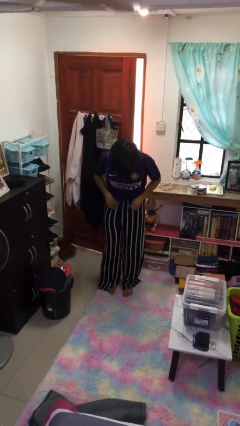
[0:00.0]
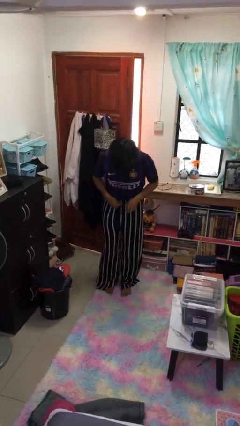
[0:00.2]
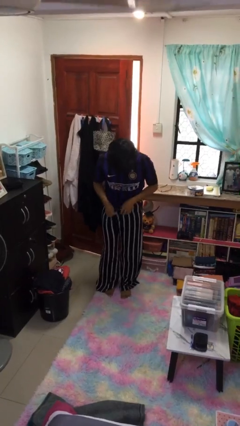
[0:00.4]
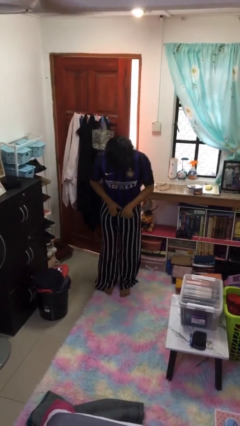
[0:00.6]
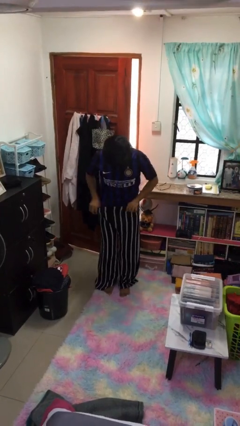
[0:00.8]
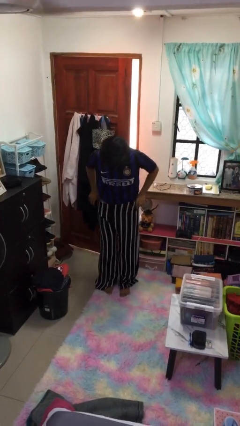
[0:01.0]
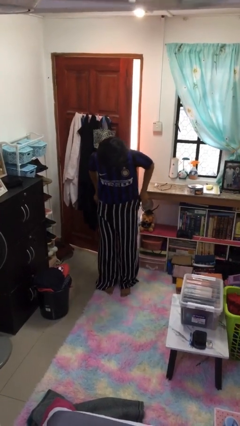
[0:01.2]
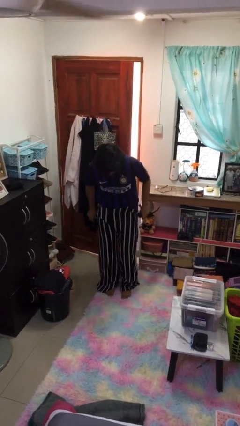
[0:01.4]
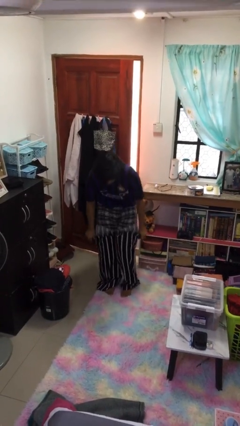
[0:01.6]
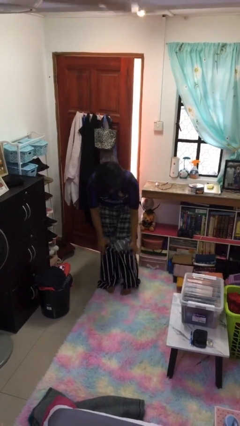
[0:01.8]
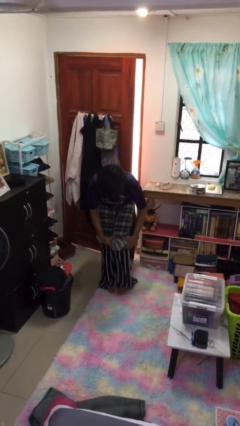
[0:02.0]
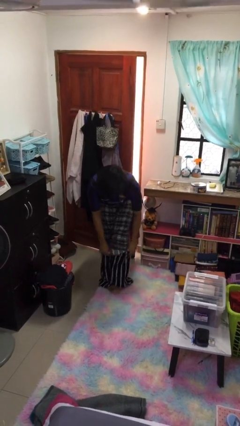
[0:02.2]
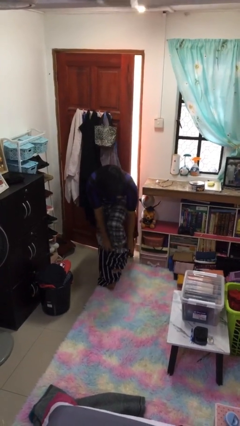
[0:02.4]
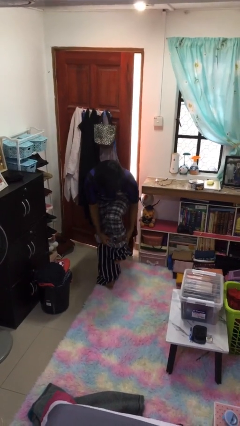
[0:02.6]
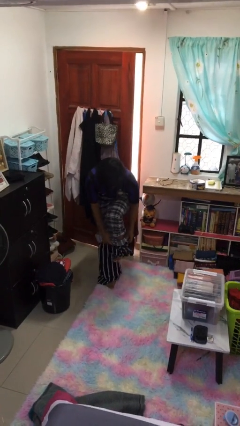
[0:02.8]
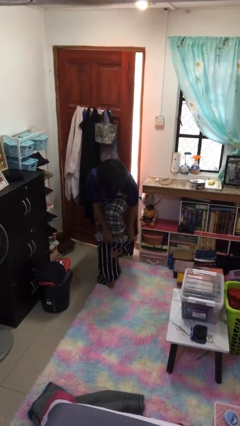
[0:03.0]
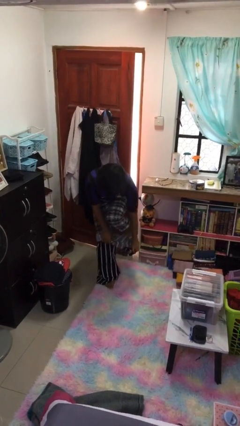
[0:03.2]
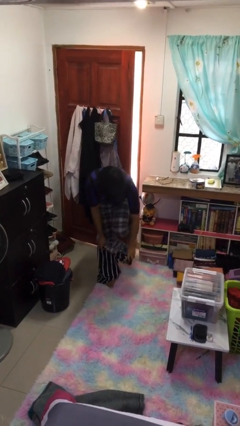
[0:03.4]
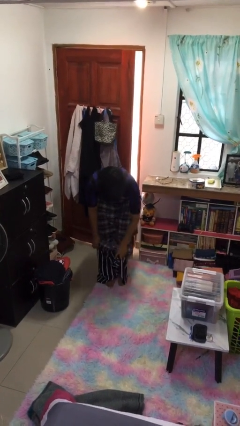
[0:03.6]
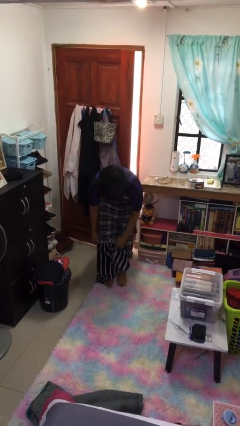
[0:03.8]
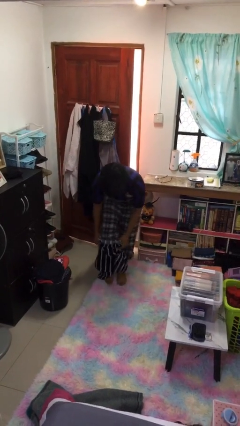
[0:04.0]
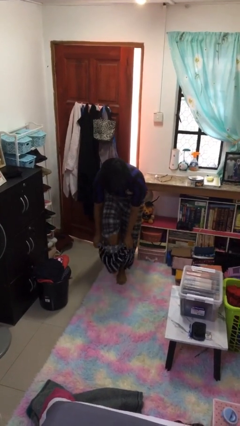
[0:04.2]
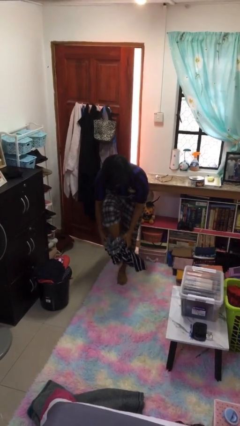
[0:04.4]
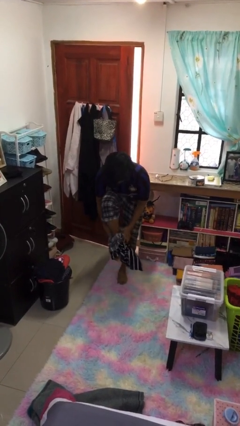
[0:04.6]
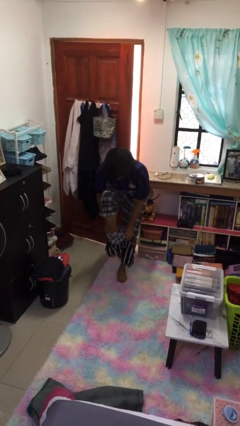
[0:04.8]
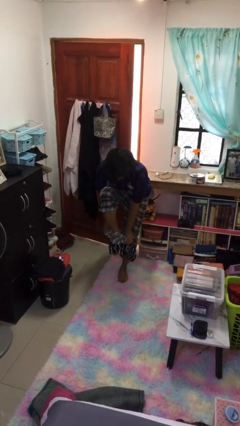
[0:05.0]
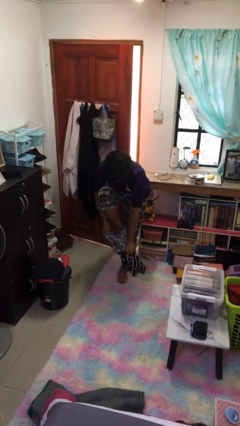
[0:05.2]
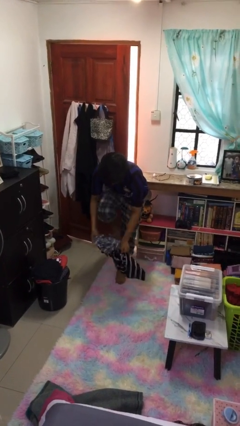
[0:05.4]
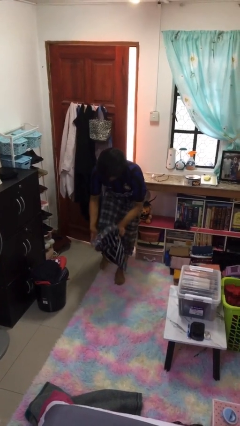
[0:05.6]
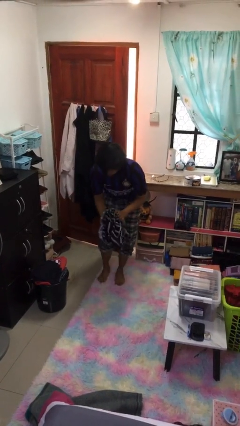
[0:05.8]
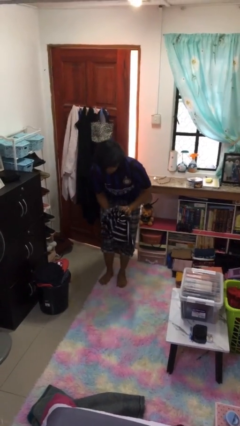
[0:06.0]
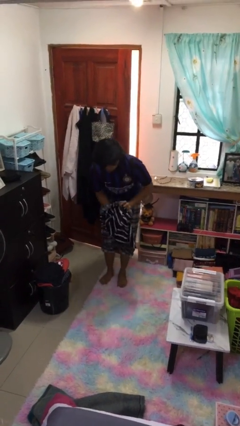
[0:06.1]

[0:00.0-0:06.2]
person takes off pants

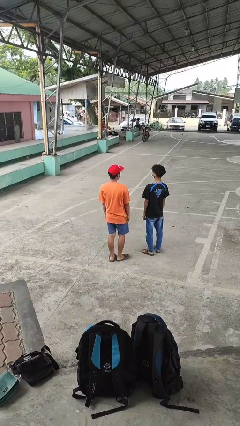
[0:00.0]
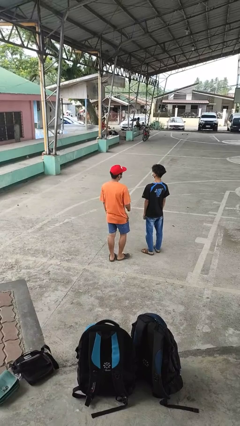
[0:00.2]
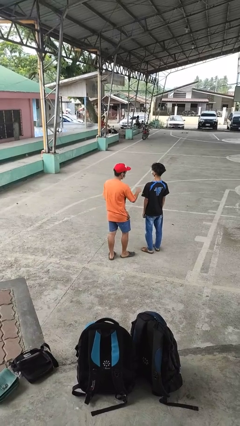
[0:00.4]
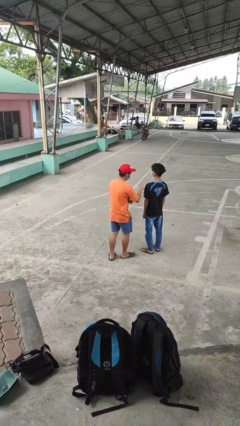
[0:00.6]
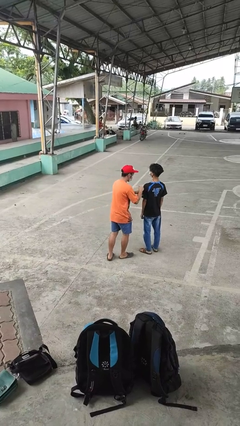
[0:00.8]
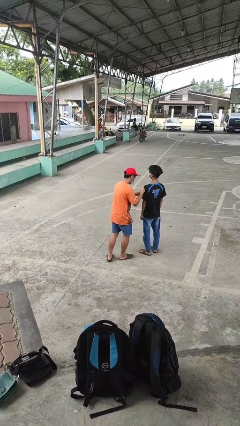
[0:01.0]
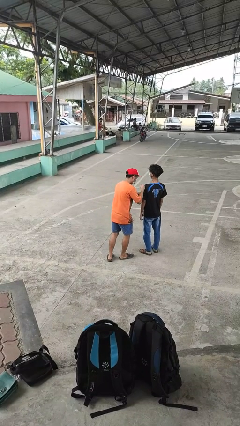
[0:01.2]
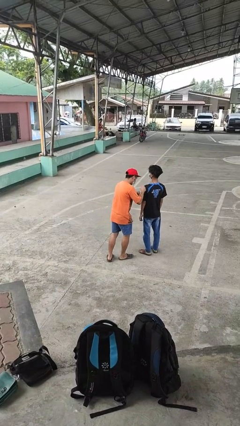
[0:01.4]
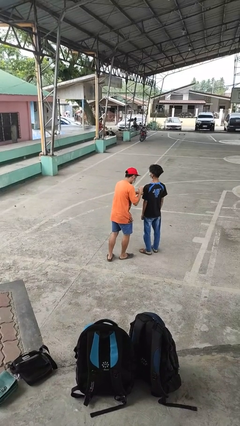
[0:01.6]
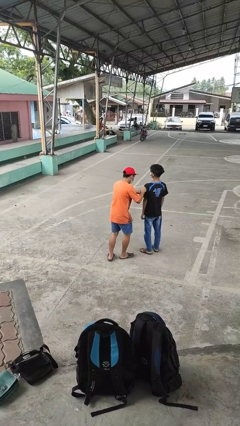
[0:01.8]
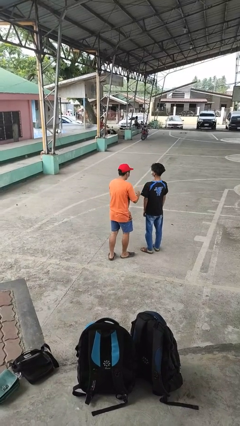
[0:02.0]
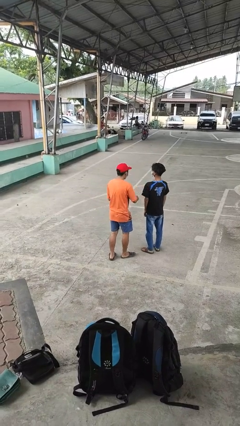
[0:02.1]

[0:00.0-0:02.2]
person pounds shoulders of person

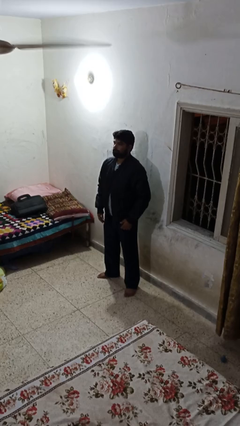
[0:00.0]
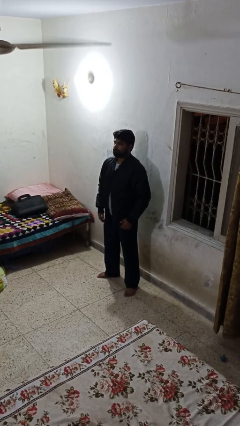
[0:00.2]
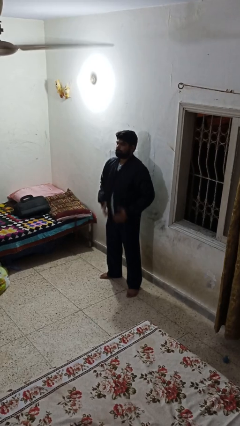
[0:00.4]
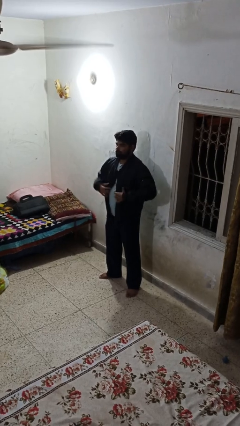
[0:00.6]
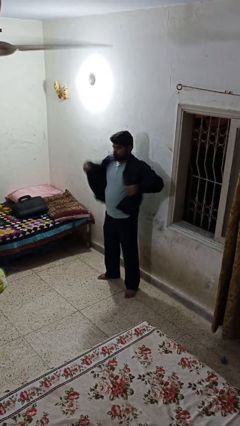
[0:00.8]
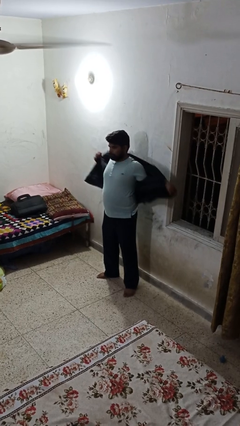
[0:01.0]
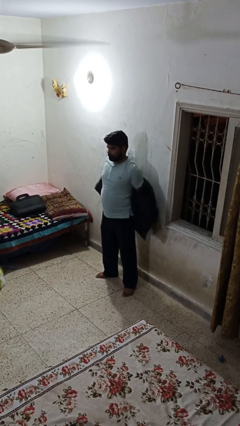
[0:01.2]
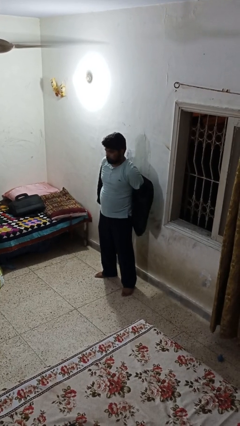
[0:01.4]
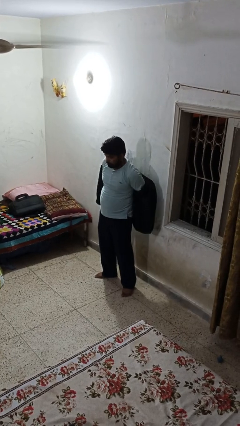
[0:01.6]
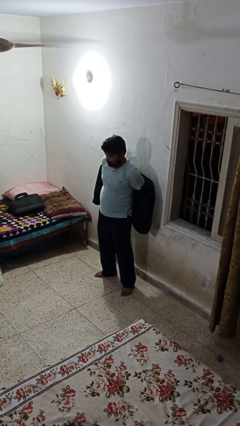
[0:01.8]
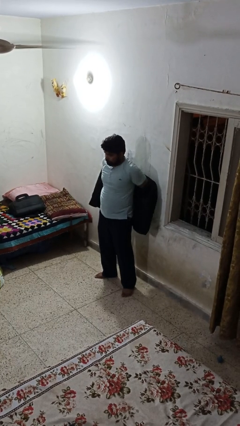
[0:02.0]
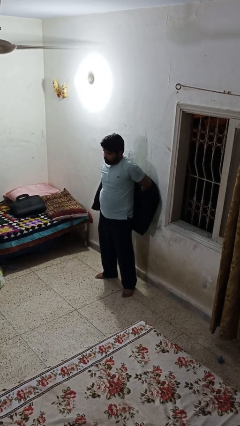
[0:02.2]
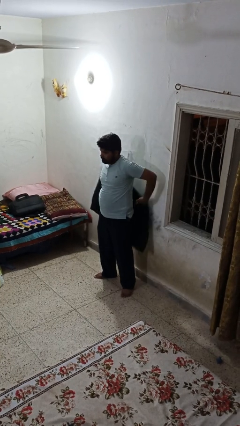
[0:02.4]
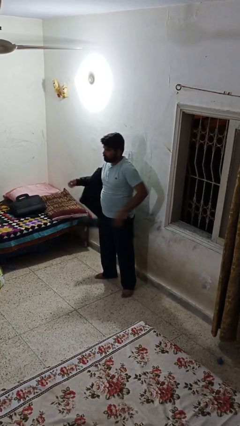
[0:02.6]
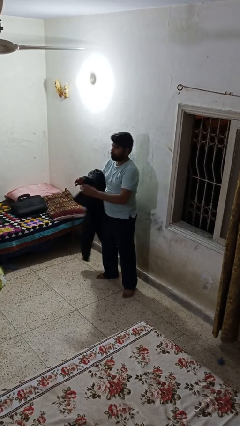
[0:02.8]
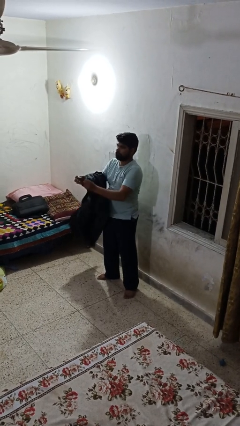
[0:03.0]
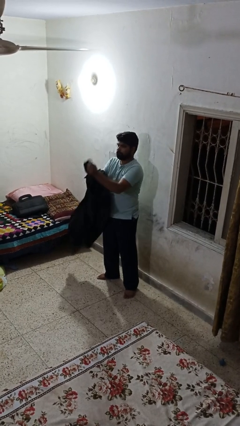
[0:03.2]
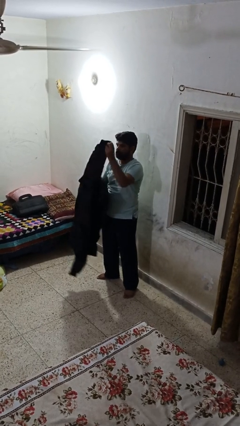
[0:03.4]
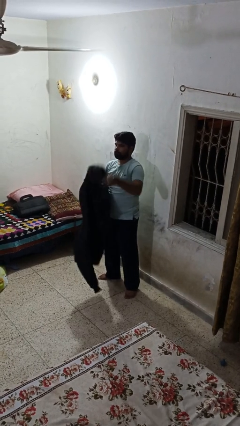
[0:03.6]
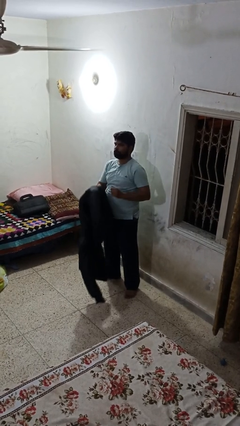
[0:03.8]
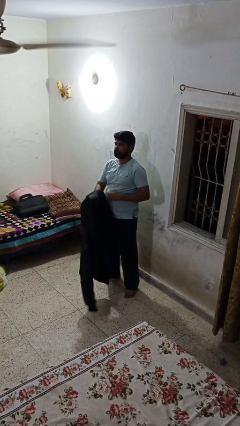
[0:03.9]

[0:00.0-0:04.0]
person takes off jacket

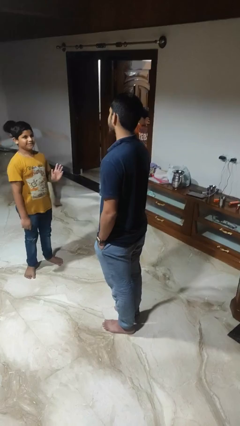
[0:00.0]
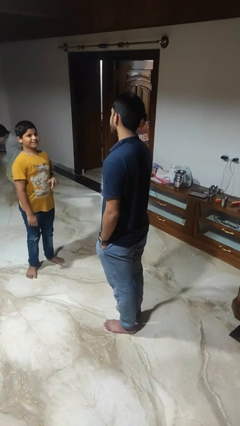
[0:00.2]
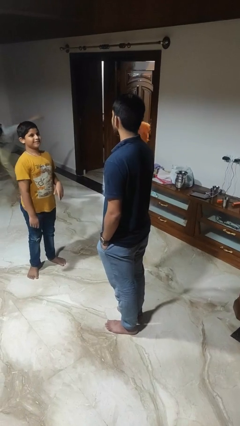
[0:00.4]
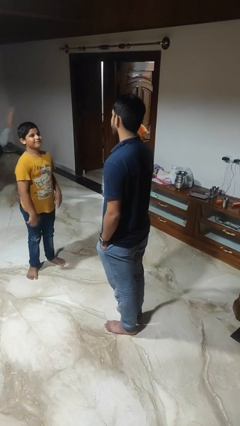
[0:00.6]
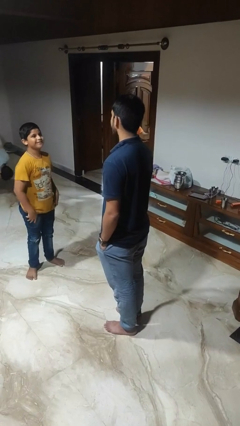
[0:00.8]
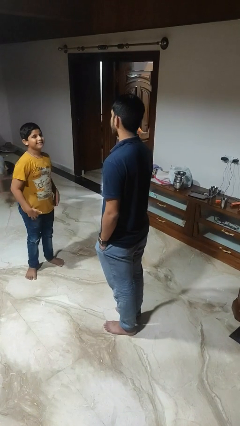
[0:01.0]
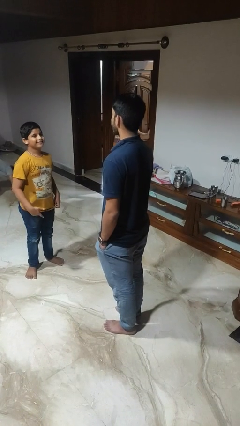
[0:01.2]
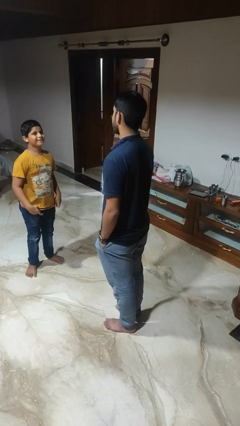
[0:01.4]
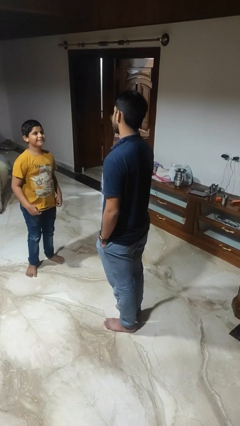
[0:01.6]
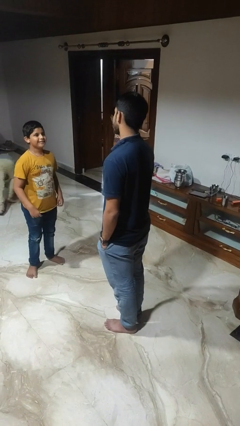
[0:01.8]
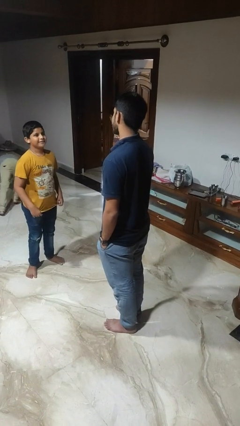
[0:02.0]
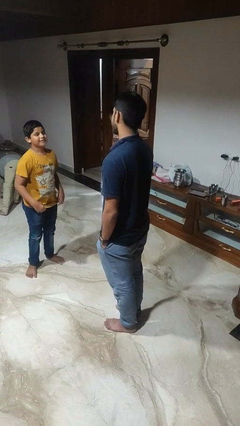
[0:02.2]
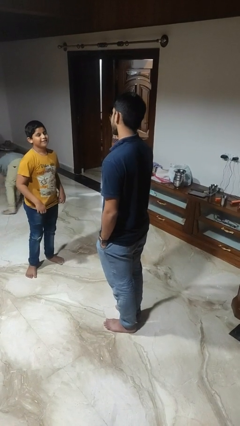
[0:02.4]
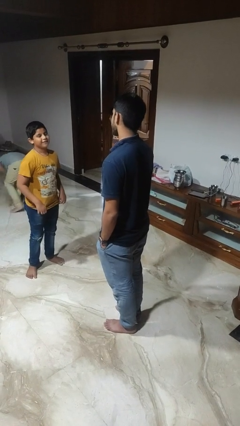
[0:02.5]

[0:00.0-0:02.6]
person talks to person

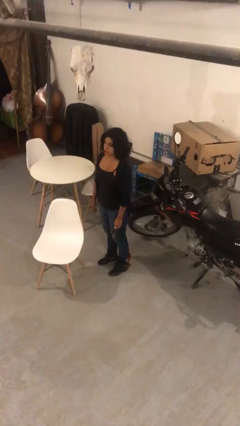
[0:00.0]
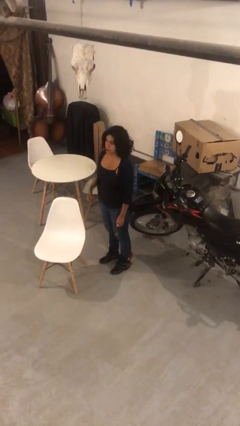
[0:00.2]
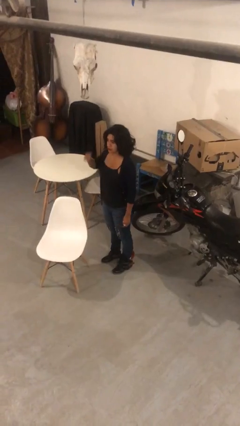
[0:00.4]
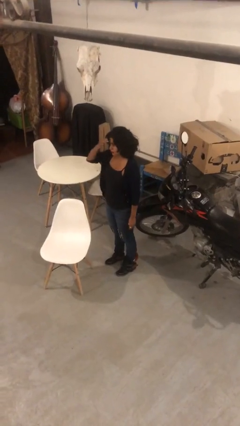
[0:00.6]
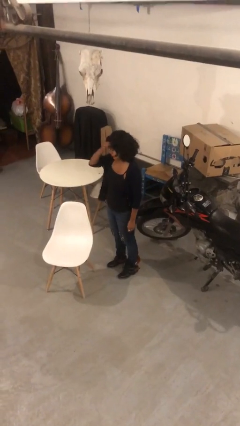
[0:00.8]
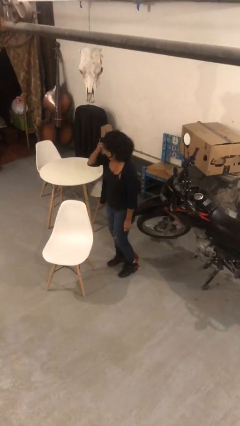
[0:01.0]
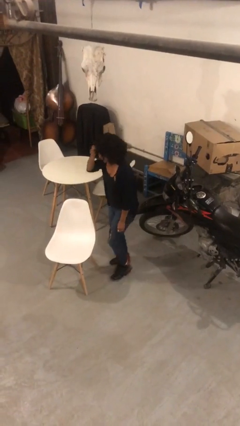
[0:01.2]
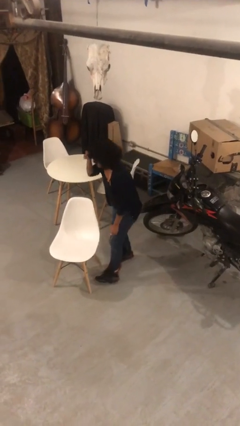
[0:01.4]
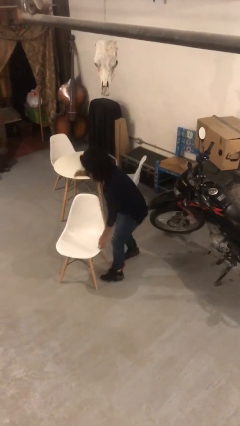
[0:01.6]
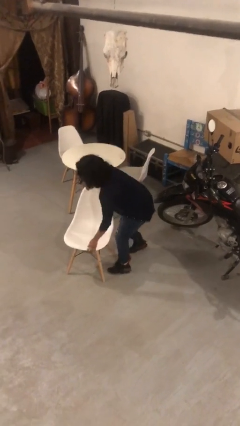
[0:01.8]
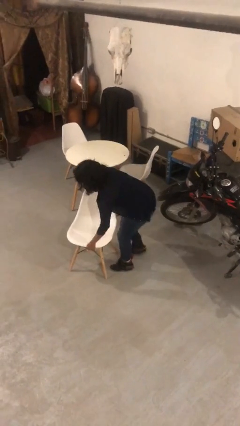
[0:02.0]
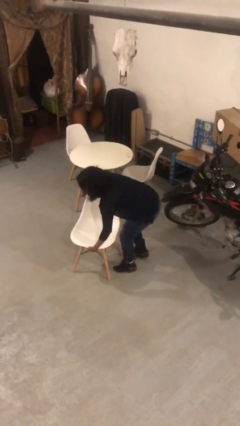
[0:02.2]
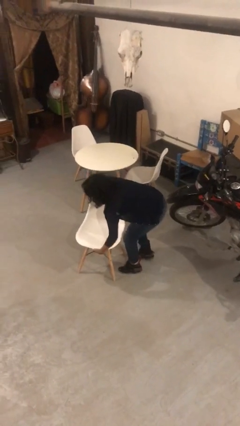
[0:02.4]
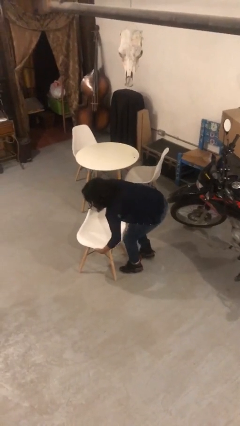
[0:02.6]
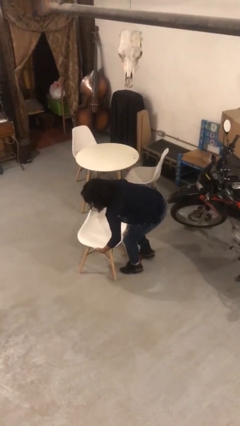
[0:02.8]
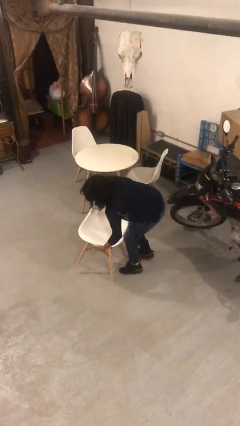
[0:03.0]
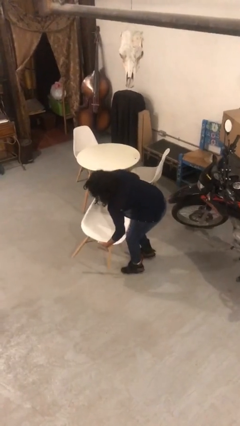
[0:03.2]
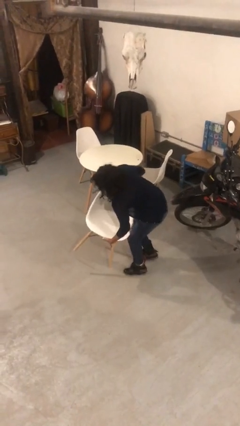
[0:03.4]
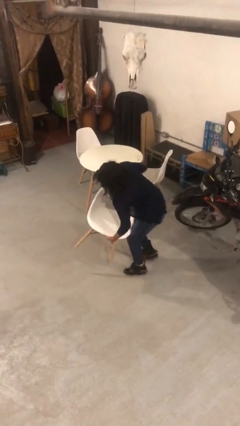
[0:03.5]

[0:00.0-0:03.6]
person picks up object from floor
